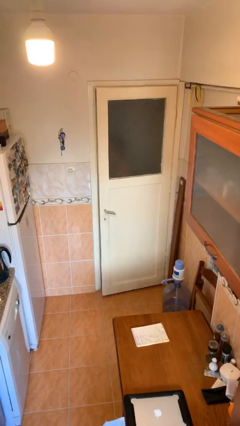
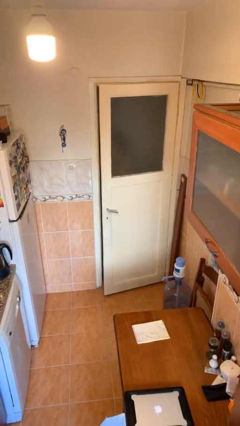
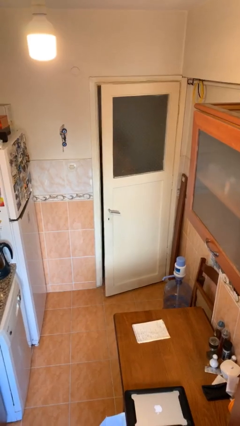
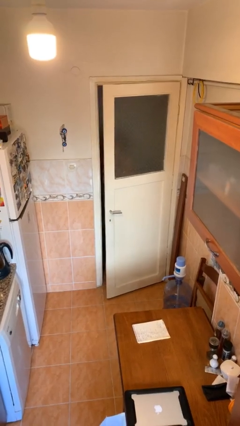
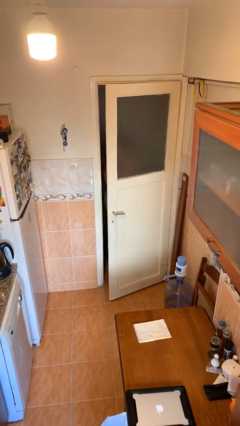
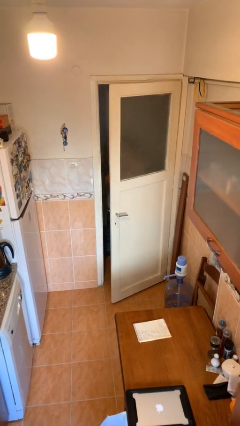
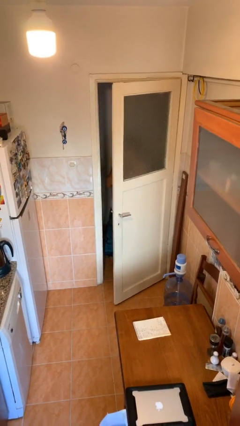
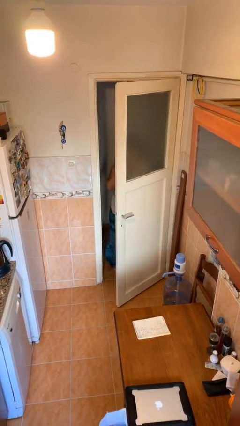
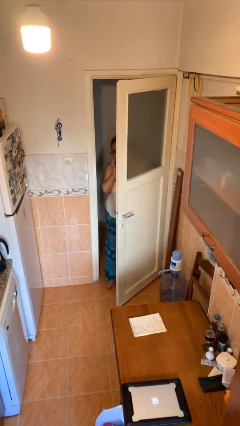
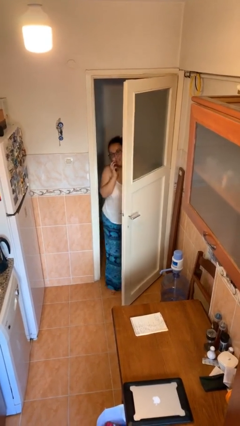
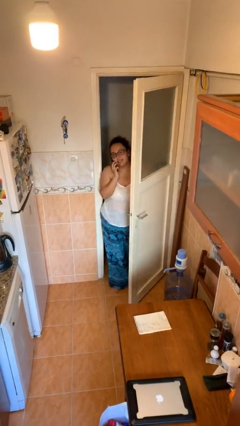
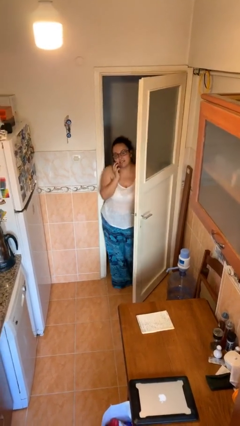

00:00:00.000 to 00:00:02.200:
person opens facility door

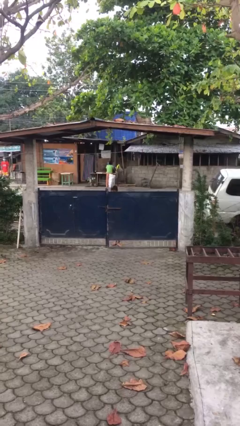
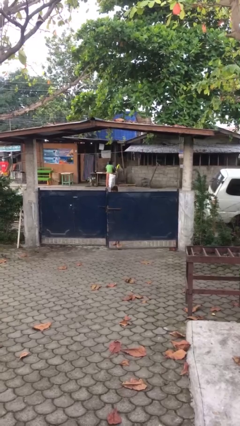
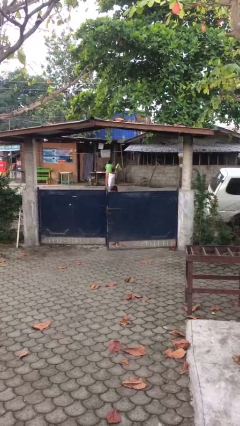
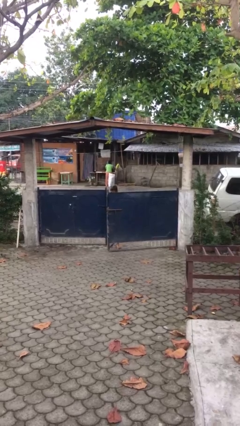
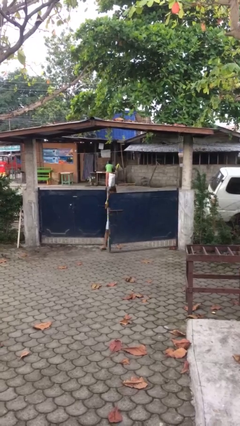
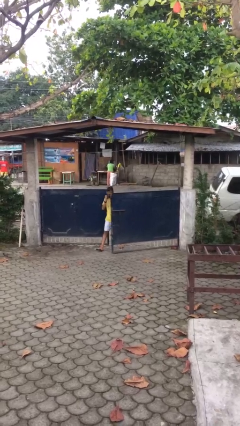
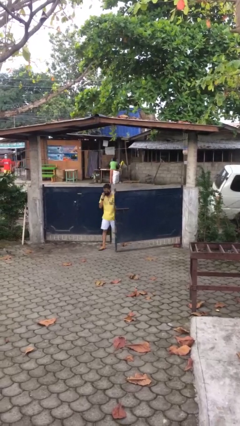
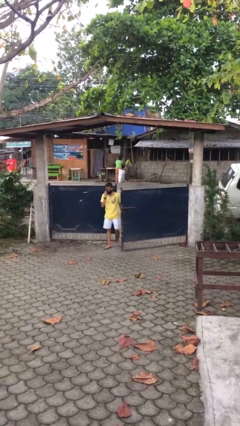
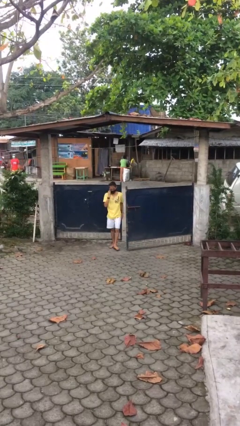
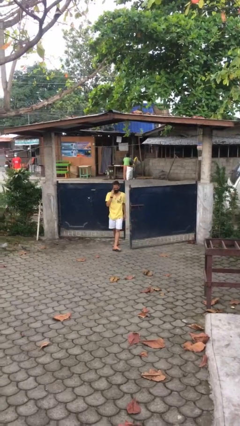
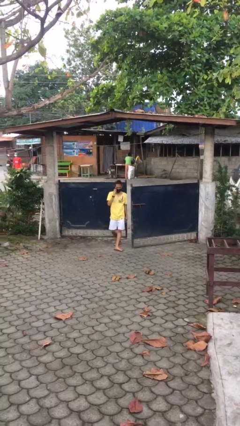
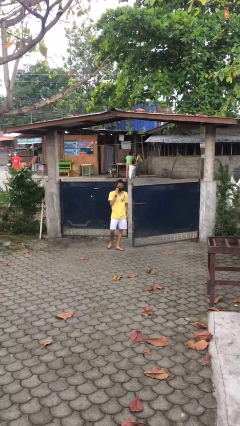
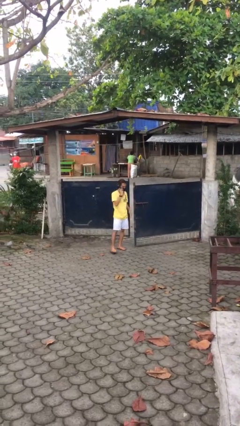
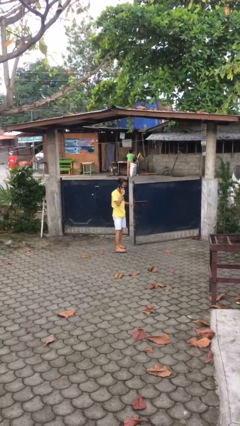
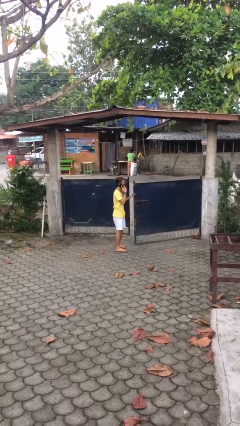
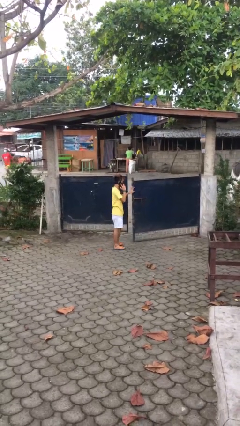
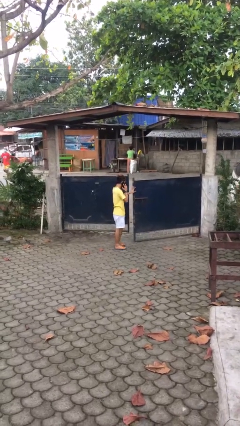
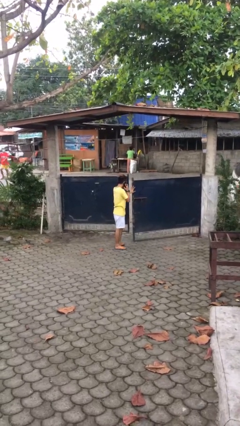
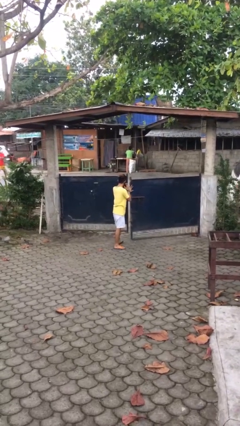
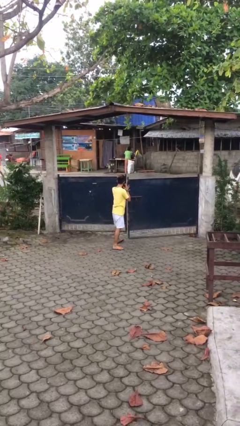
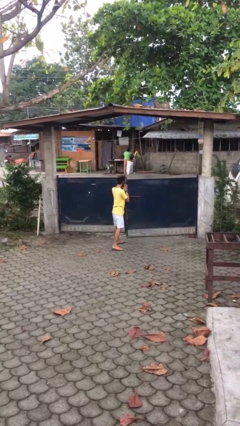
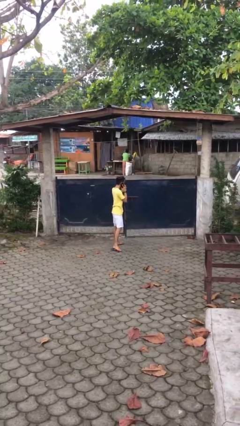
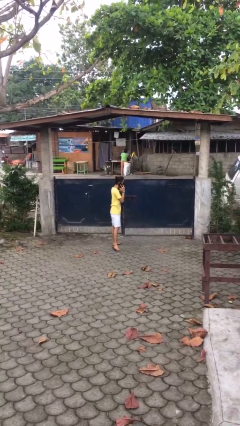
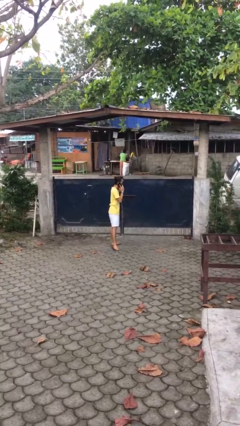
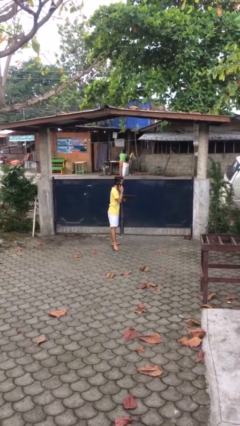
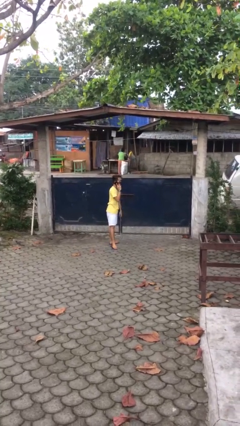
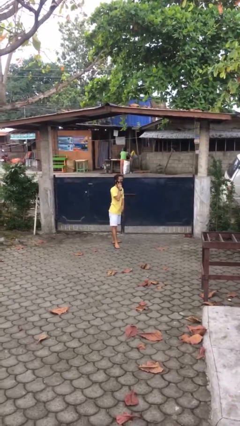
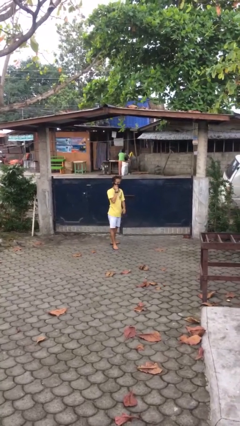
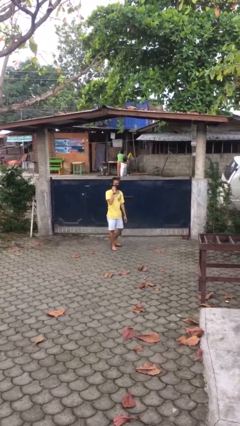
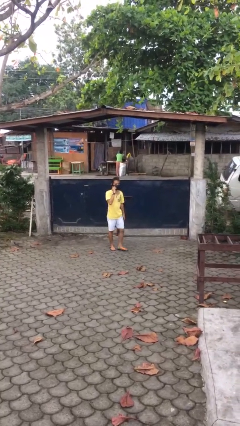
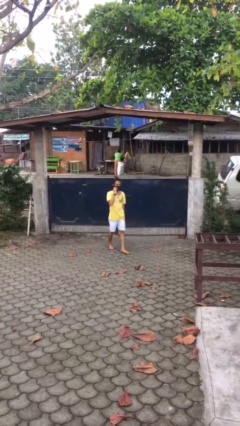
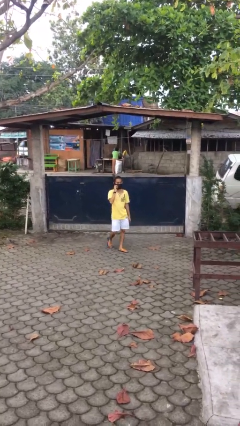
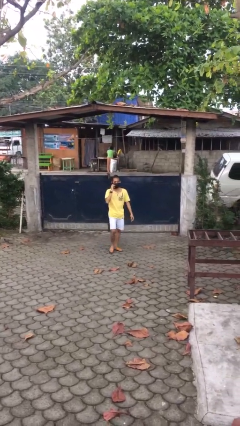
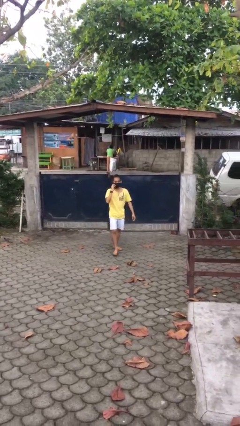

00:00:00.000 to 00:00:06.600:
person enters scene through structure

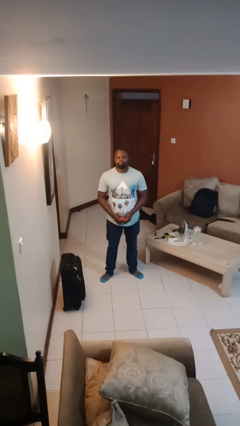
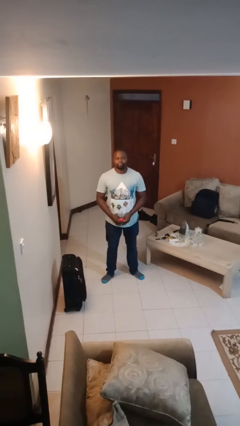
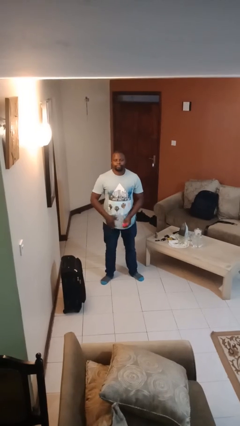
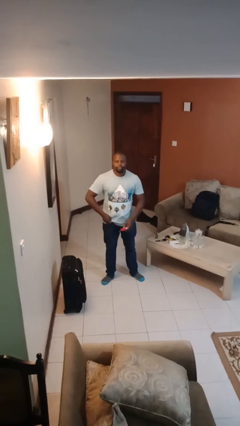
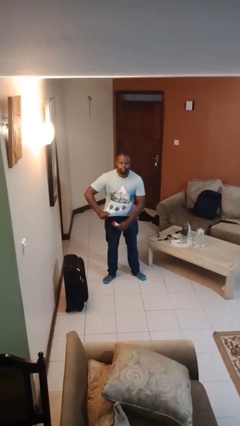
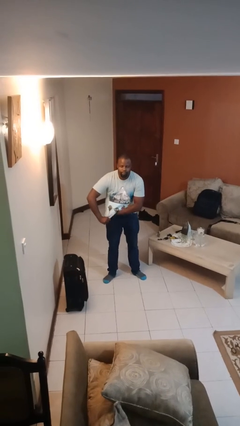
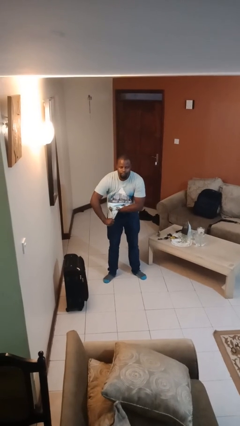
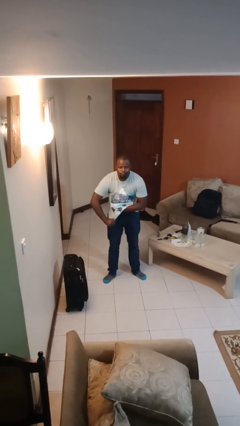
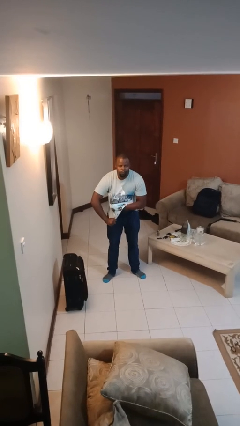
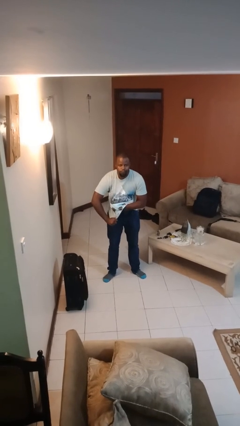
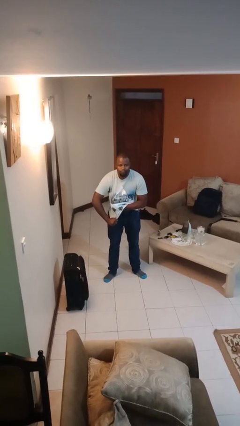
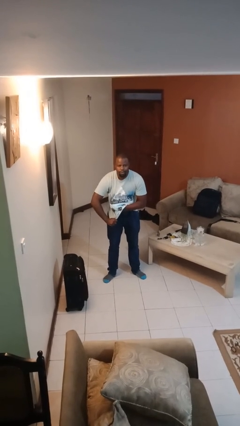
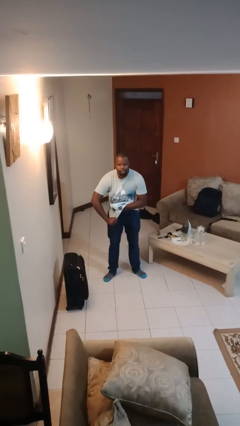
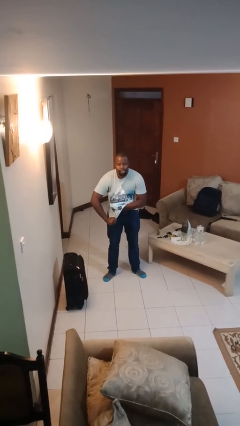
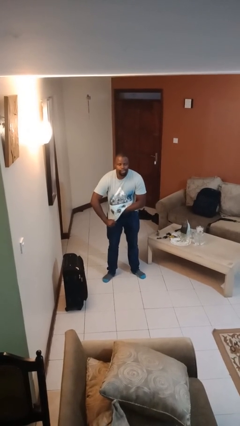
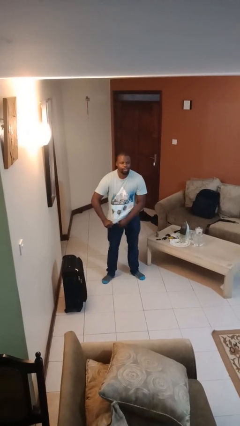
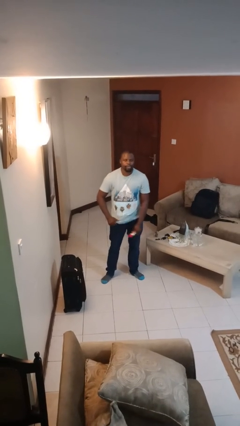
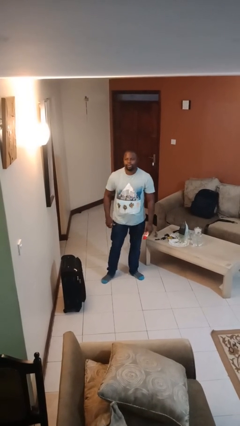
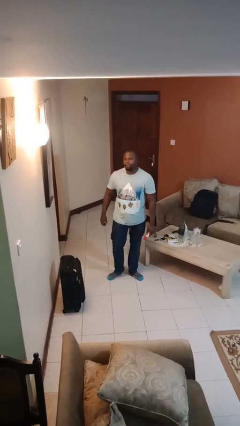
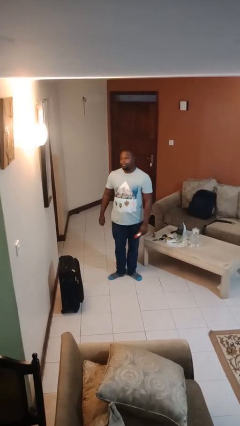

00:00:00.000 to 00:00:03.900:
person applies deodorant

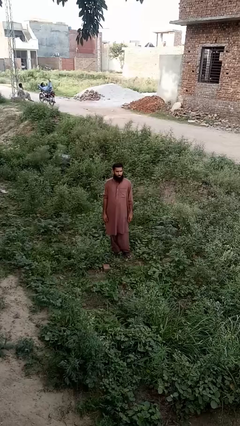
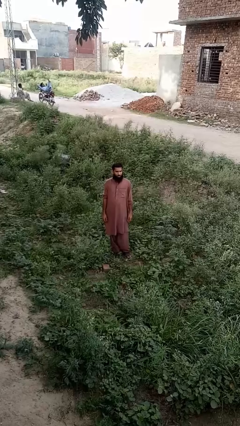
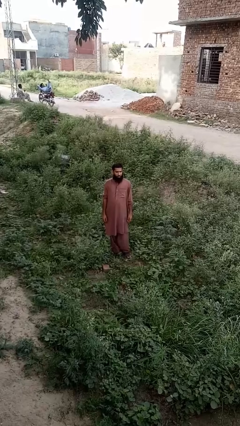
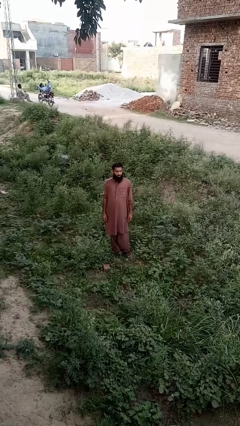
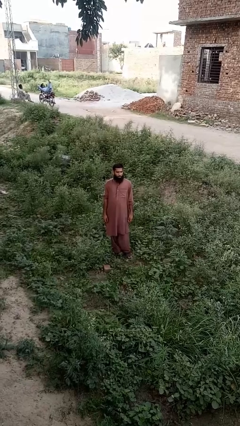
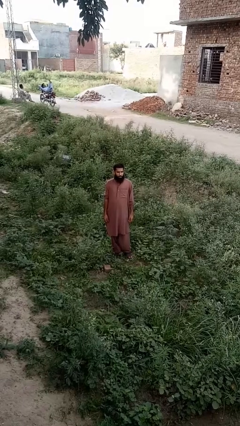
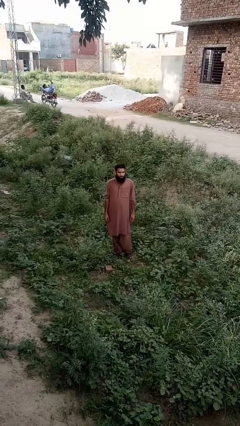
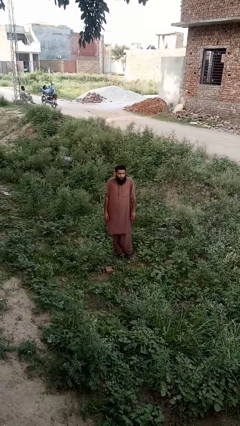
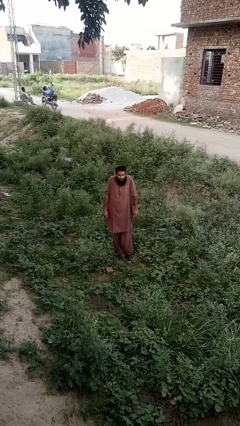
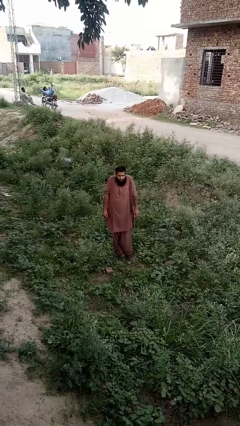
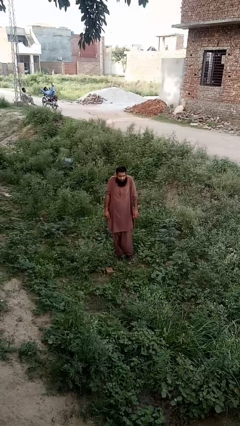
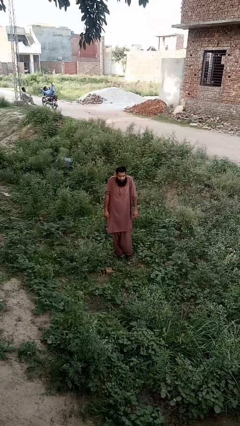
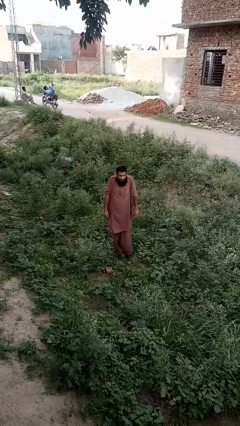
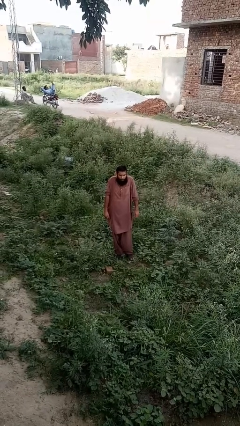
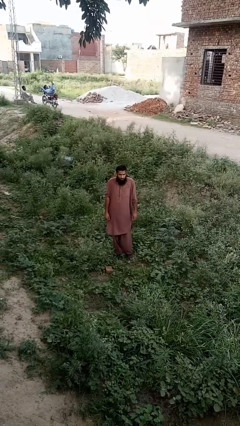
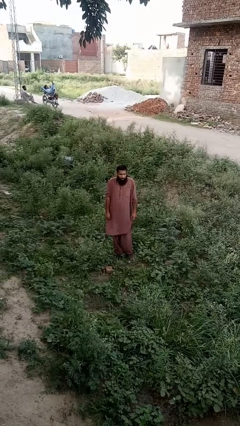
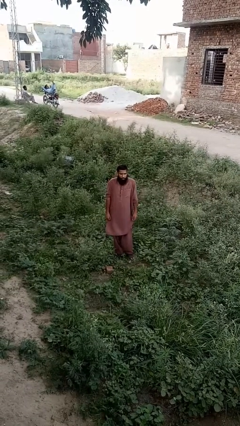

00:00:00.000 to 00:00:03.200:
person shrugs

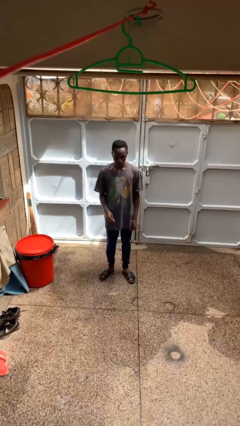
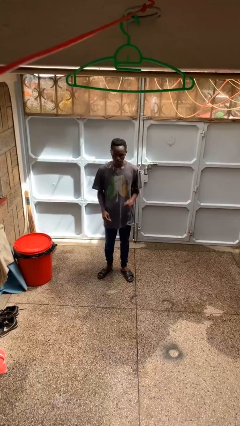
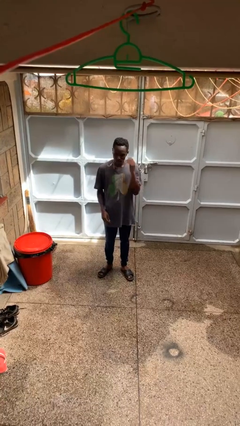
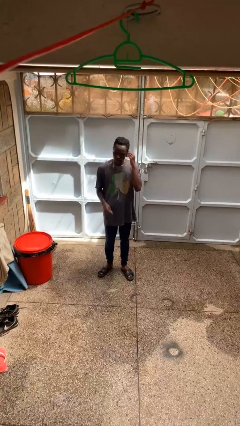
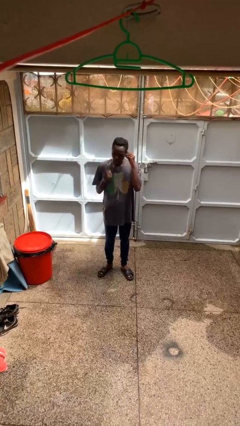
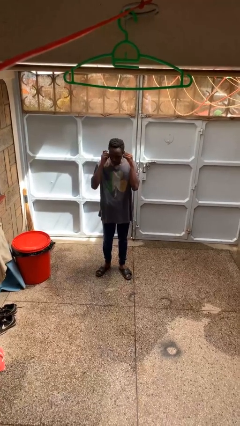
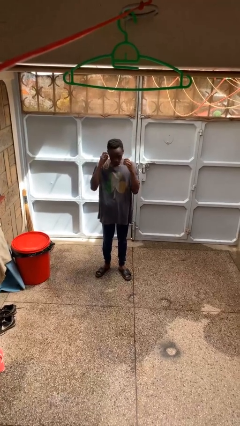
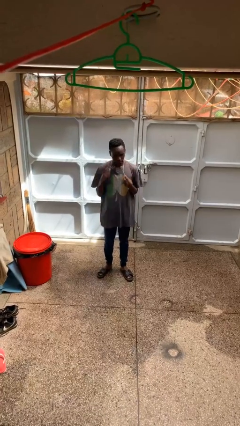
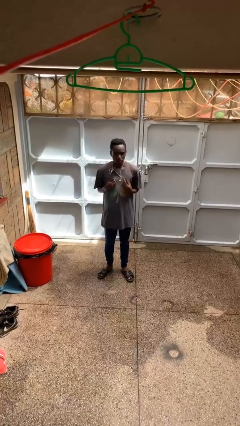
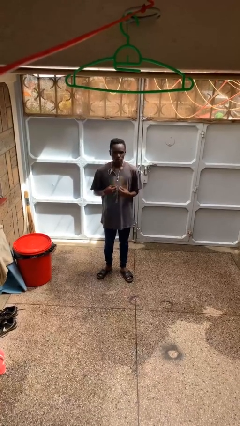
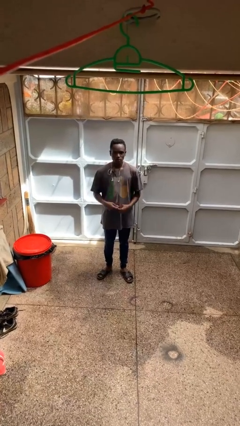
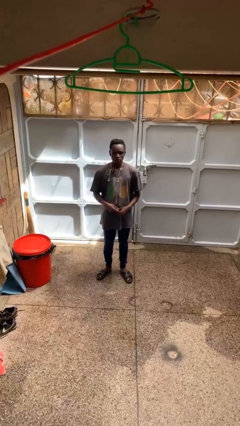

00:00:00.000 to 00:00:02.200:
person takes off headphones
